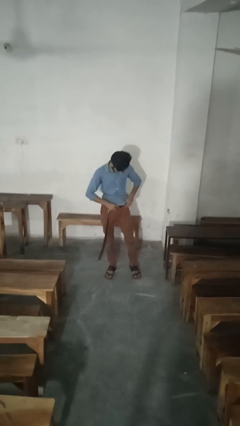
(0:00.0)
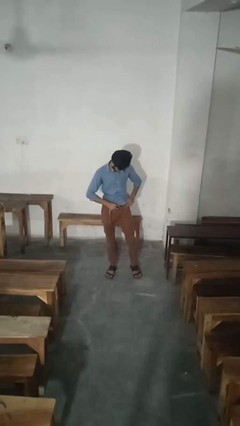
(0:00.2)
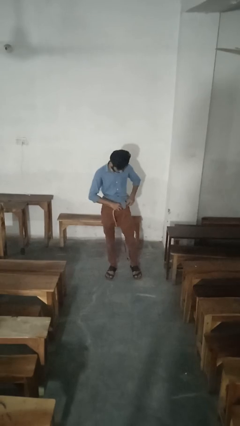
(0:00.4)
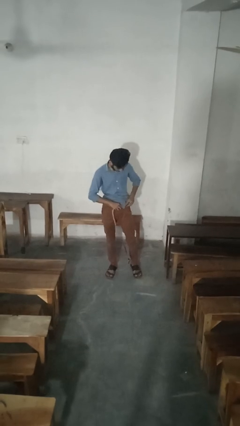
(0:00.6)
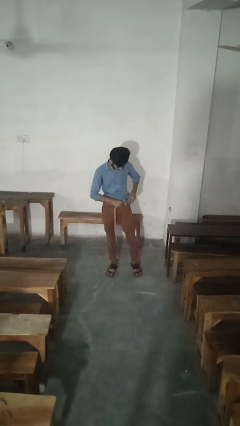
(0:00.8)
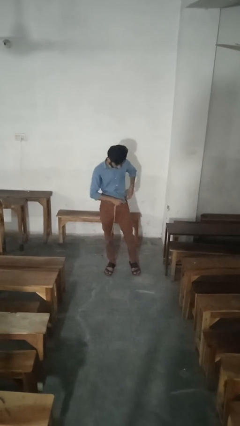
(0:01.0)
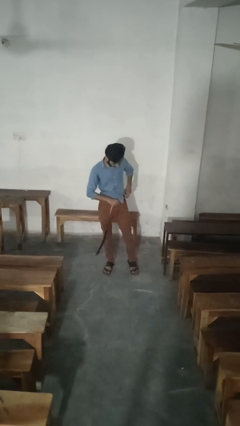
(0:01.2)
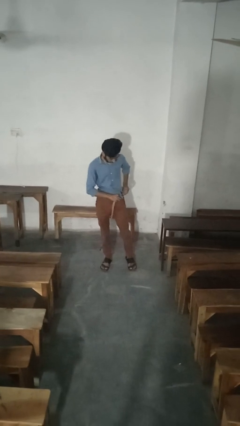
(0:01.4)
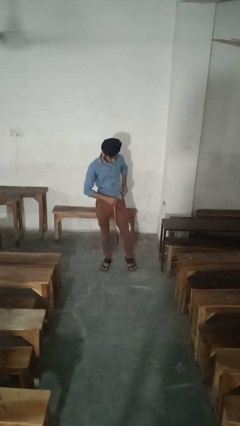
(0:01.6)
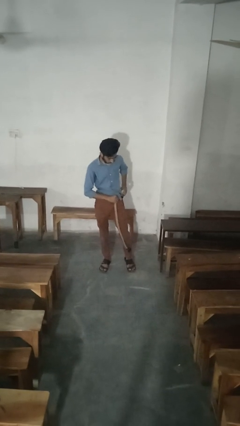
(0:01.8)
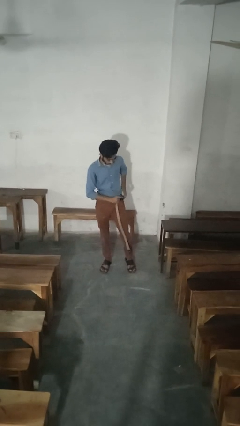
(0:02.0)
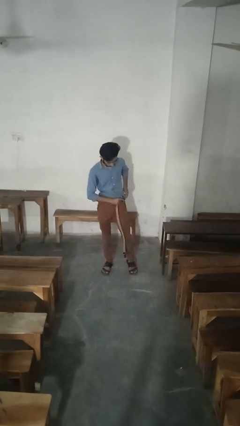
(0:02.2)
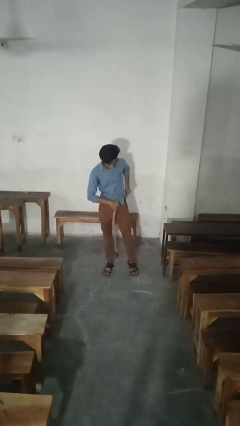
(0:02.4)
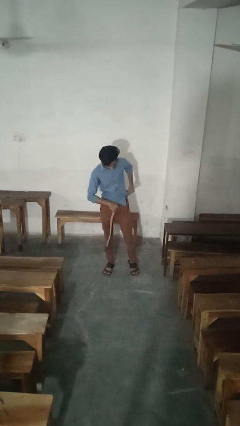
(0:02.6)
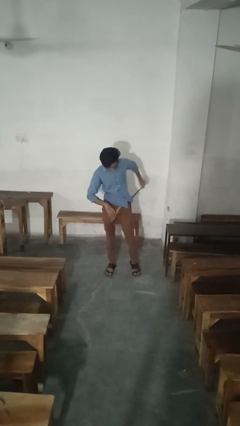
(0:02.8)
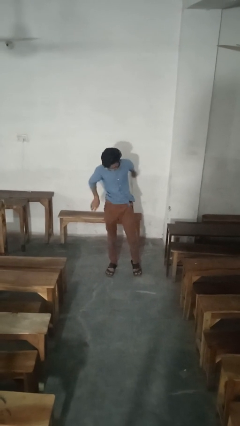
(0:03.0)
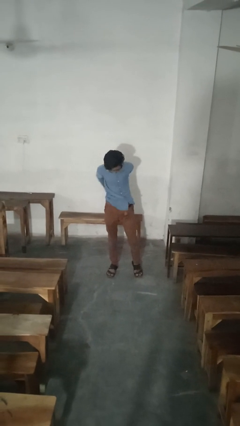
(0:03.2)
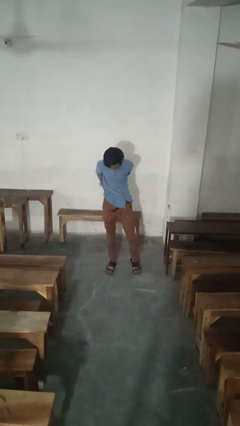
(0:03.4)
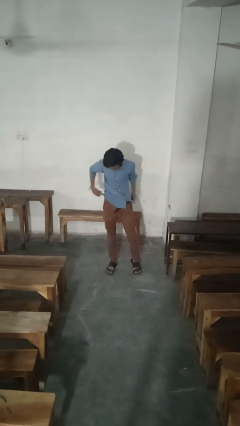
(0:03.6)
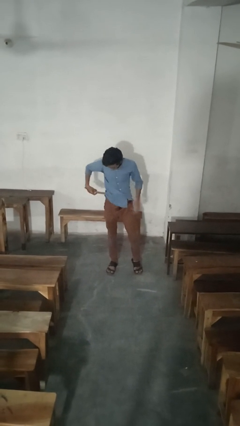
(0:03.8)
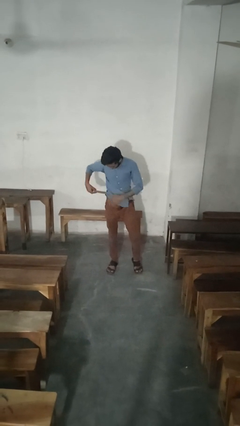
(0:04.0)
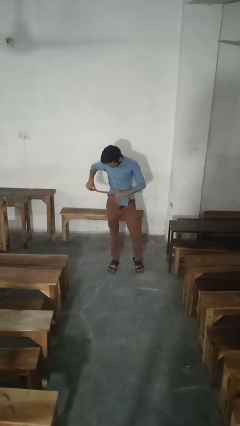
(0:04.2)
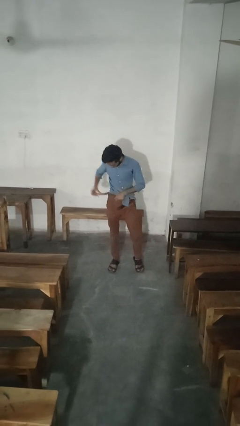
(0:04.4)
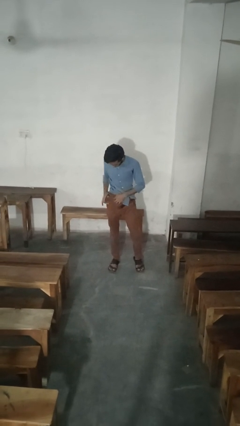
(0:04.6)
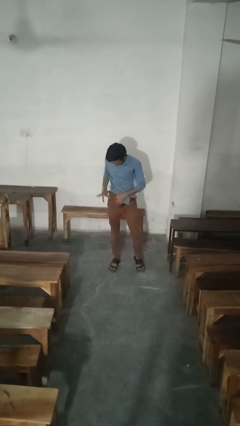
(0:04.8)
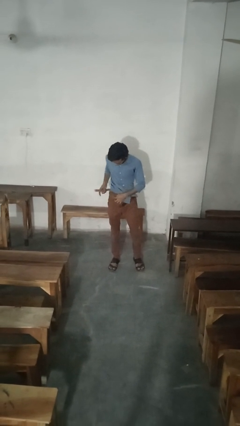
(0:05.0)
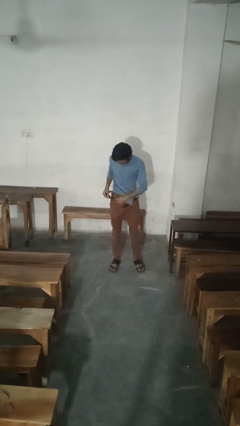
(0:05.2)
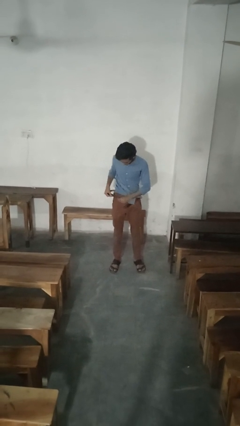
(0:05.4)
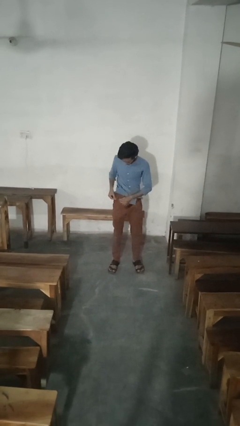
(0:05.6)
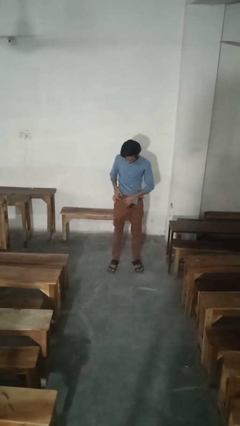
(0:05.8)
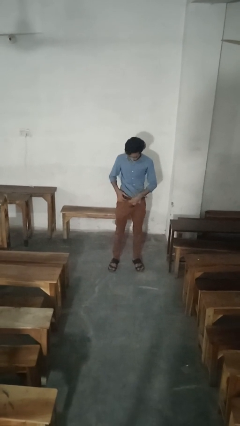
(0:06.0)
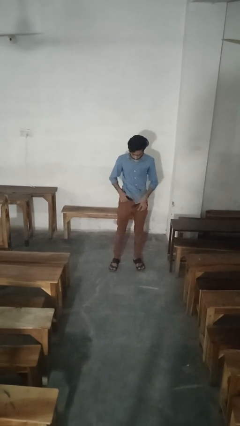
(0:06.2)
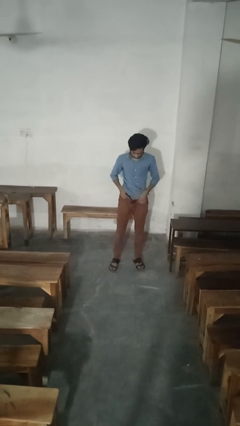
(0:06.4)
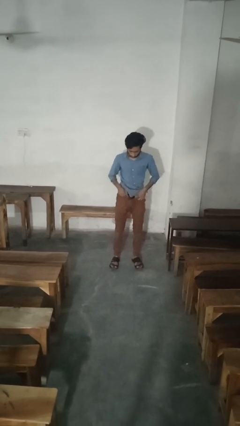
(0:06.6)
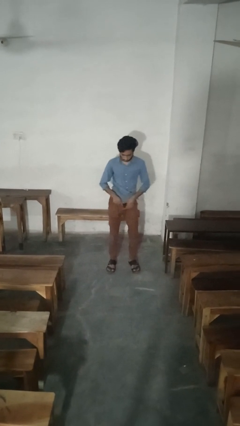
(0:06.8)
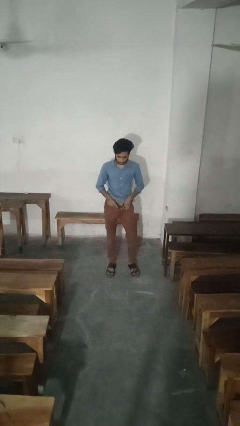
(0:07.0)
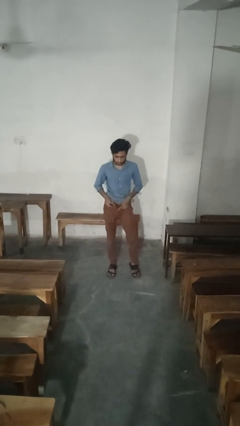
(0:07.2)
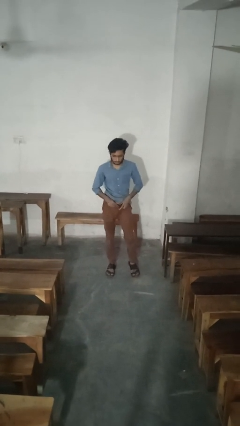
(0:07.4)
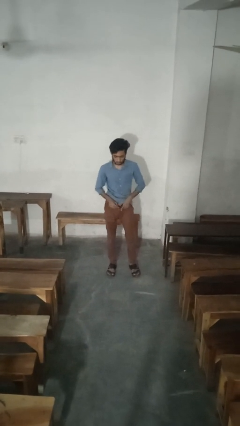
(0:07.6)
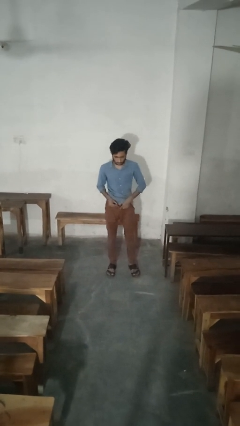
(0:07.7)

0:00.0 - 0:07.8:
person puts on belt

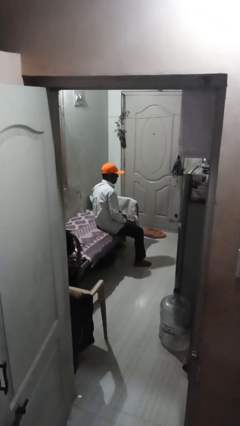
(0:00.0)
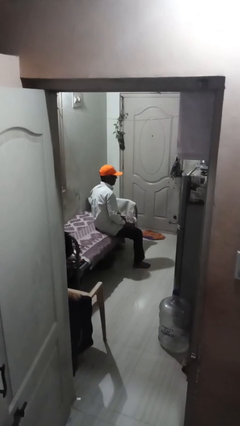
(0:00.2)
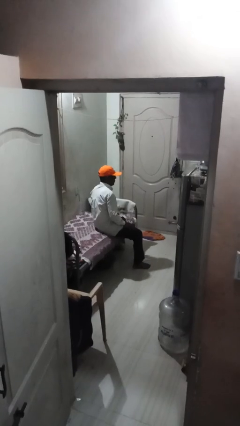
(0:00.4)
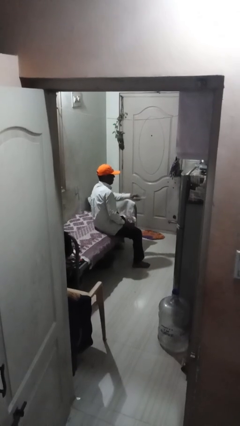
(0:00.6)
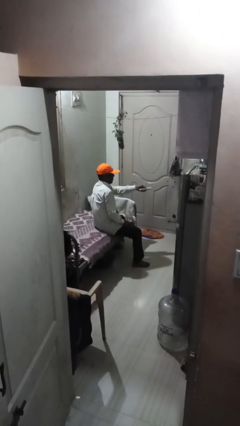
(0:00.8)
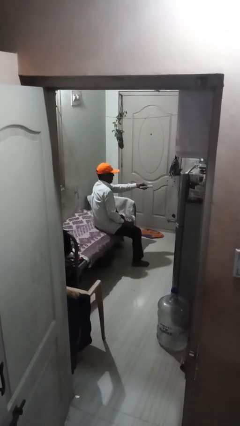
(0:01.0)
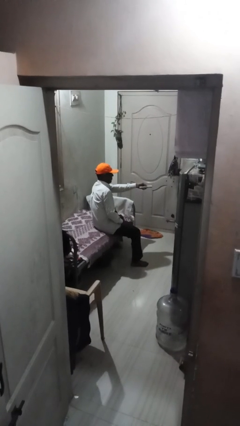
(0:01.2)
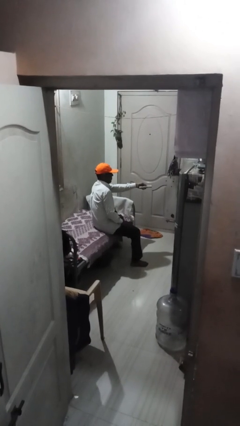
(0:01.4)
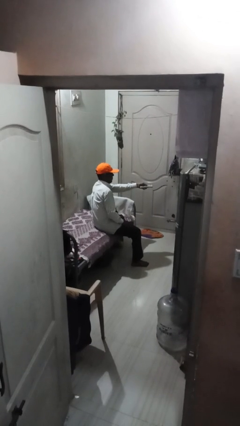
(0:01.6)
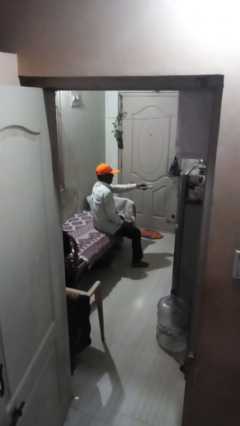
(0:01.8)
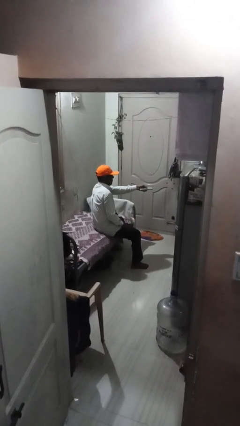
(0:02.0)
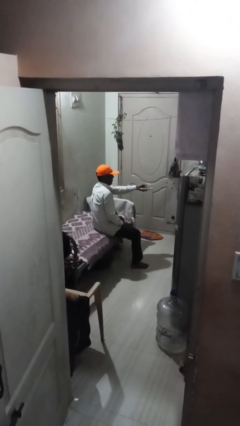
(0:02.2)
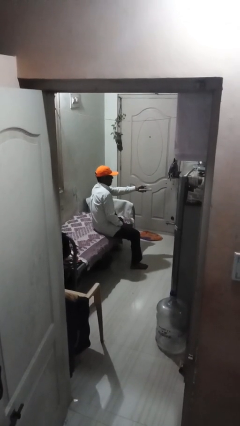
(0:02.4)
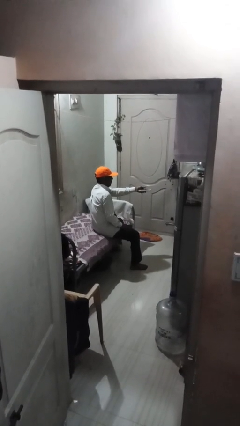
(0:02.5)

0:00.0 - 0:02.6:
person uses television remote

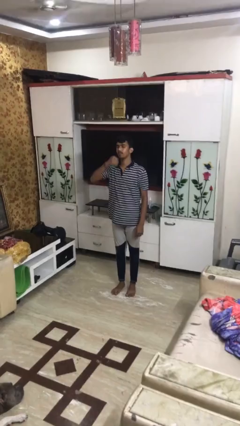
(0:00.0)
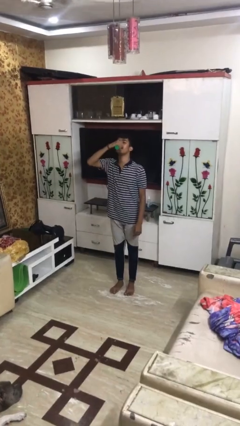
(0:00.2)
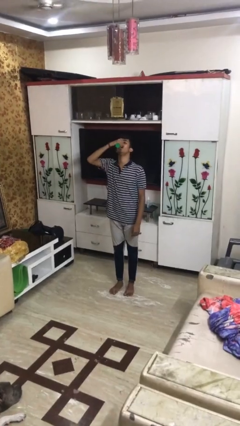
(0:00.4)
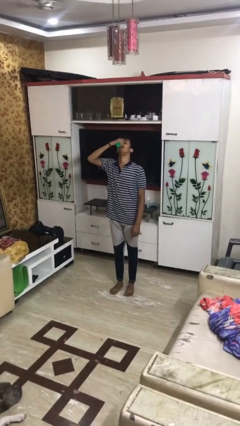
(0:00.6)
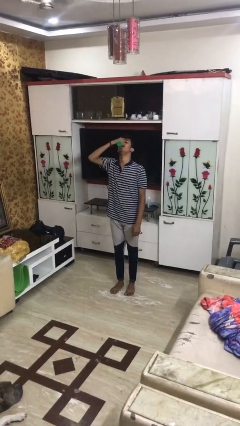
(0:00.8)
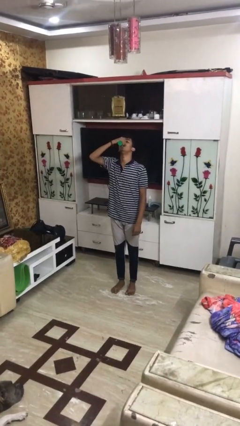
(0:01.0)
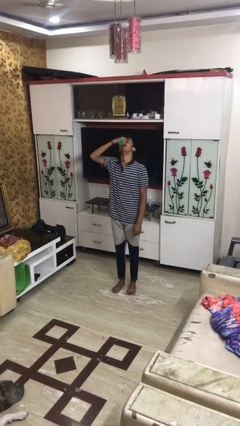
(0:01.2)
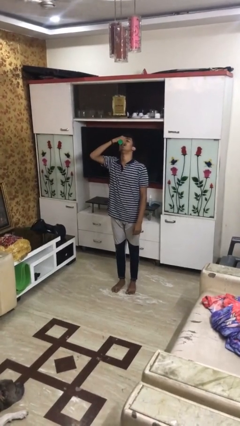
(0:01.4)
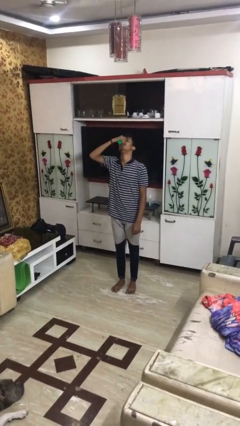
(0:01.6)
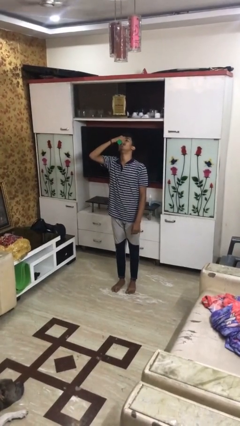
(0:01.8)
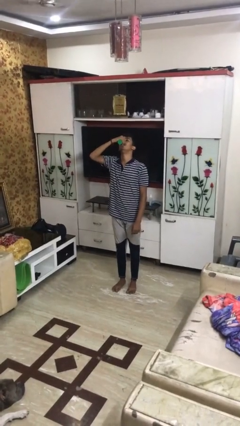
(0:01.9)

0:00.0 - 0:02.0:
person drinks from beverage can

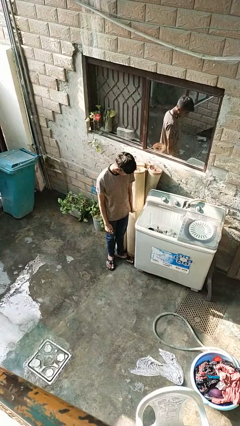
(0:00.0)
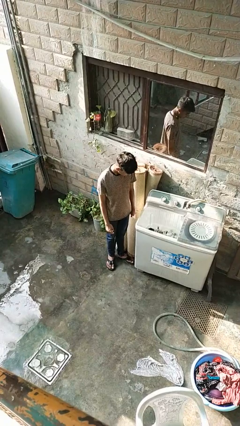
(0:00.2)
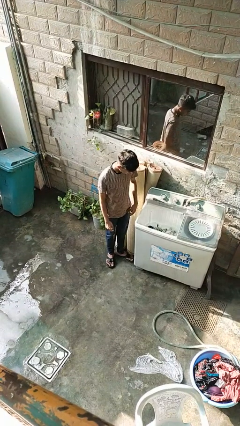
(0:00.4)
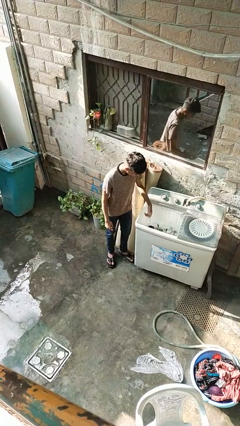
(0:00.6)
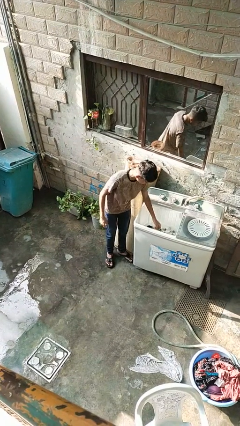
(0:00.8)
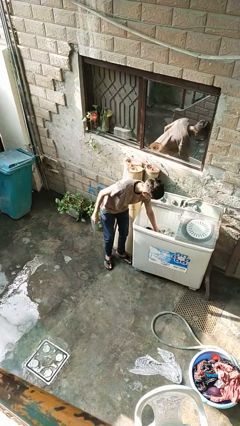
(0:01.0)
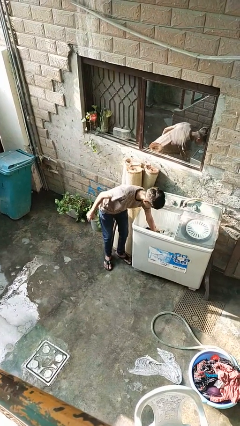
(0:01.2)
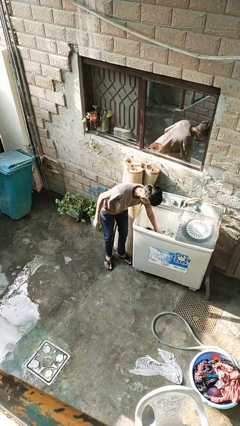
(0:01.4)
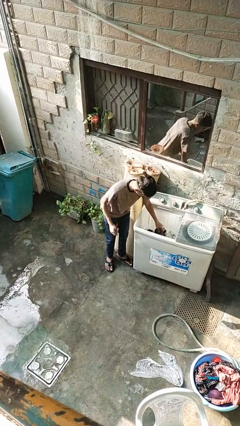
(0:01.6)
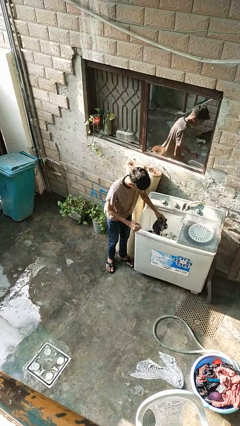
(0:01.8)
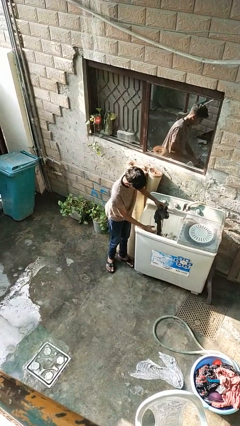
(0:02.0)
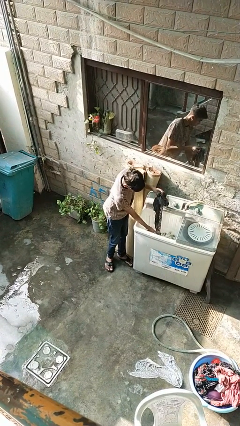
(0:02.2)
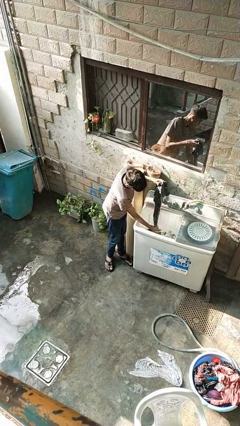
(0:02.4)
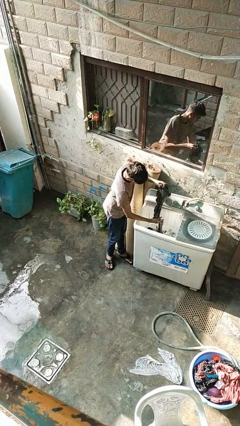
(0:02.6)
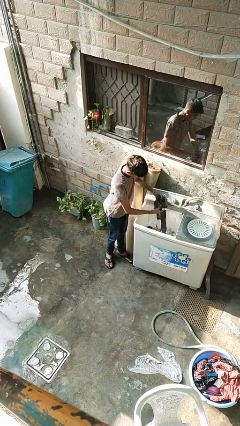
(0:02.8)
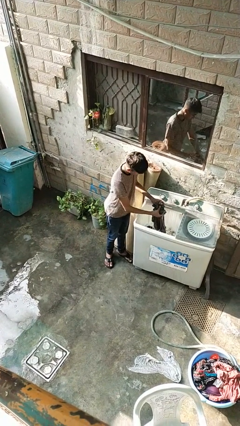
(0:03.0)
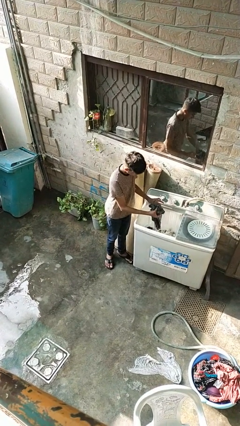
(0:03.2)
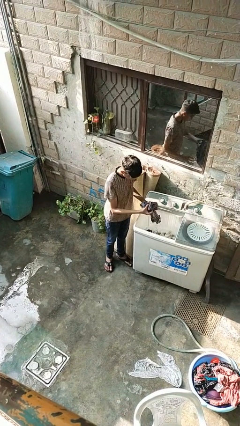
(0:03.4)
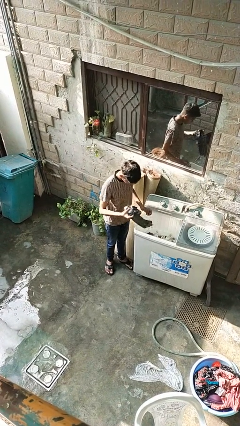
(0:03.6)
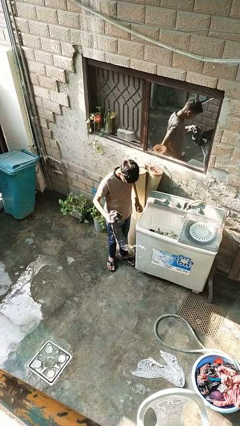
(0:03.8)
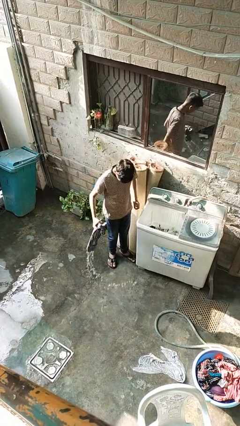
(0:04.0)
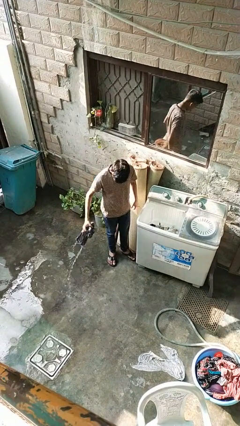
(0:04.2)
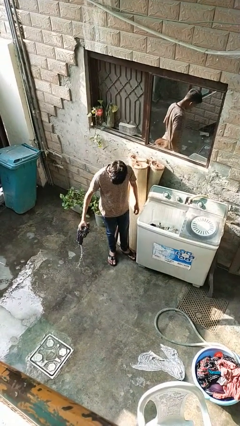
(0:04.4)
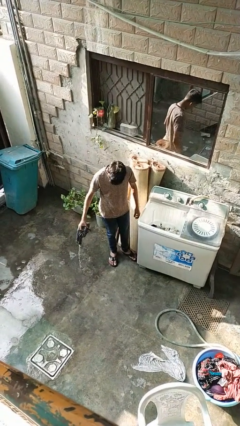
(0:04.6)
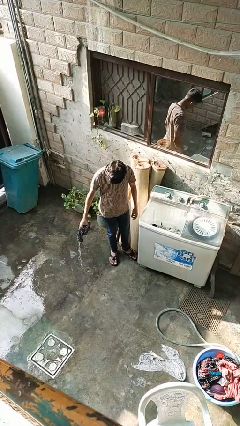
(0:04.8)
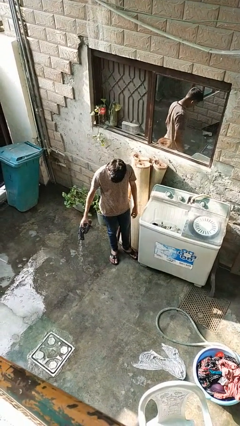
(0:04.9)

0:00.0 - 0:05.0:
person unloads clotheswasher

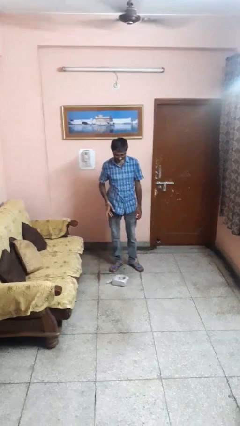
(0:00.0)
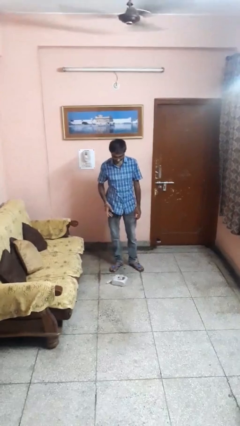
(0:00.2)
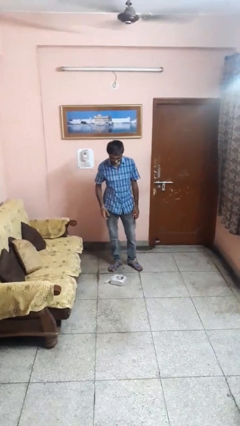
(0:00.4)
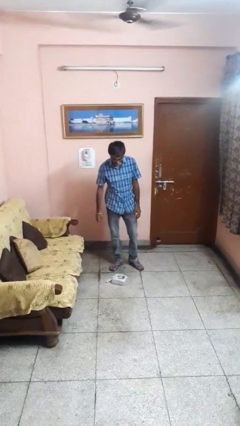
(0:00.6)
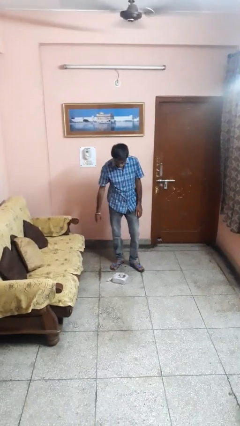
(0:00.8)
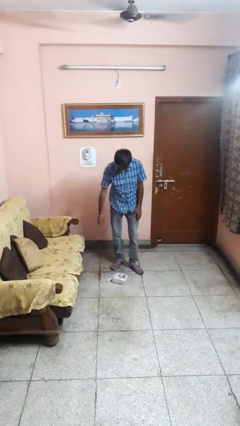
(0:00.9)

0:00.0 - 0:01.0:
person drops object
